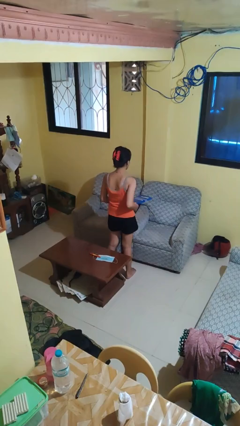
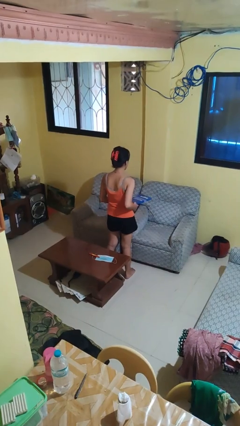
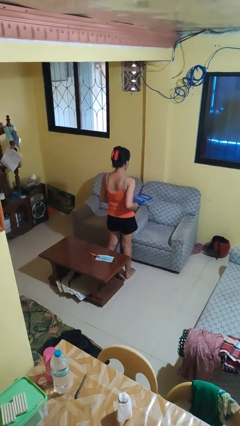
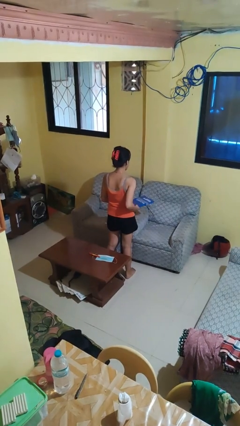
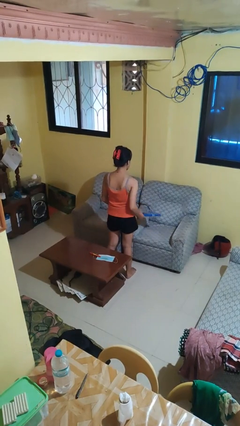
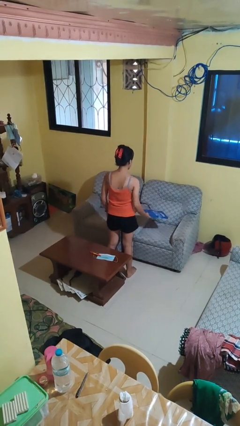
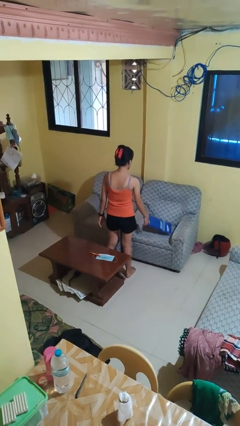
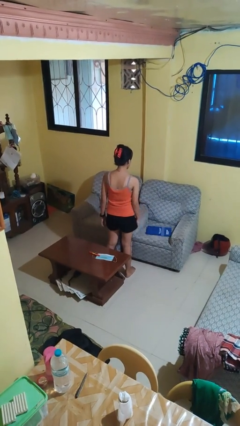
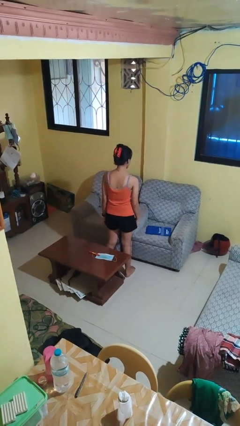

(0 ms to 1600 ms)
person puts down object on couch

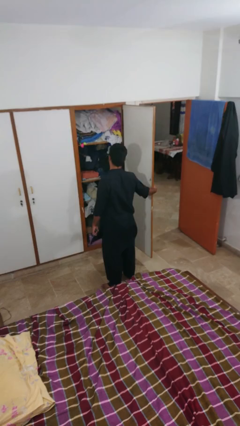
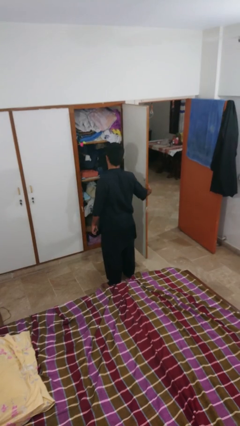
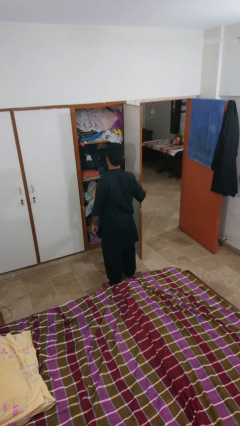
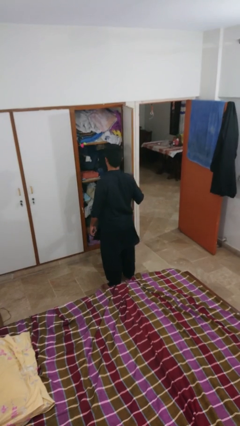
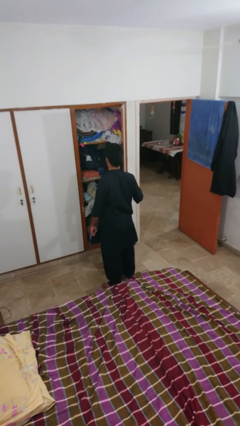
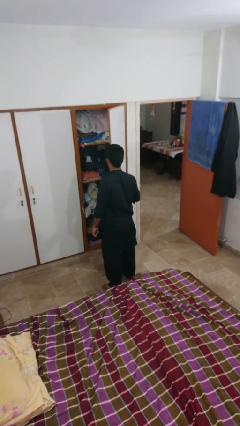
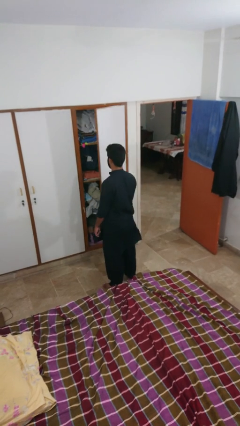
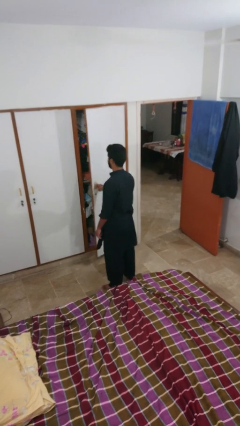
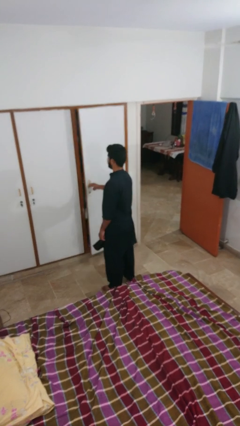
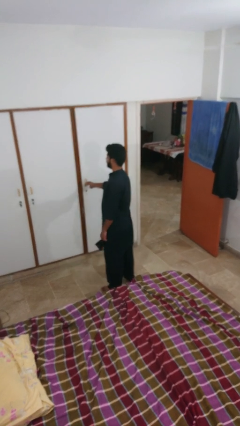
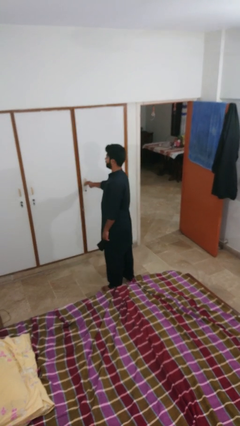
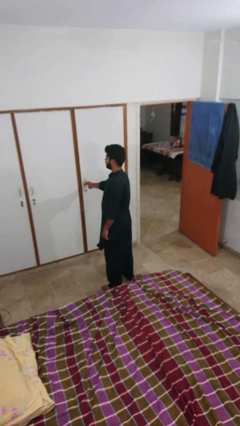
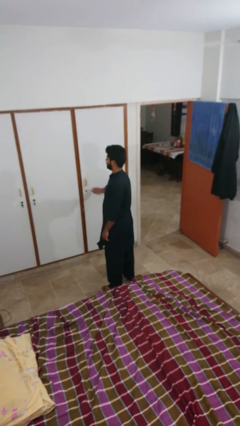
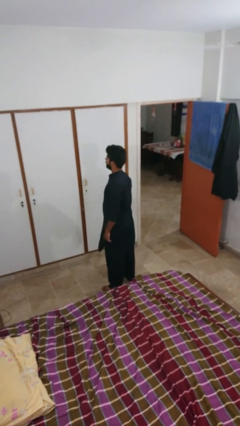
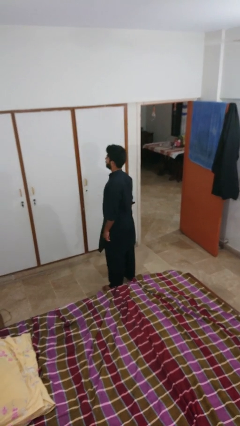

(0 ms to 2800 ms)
person closes closet door

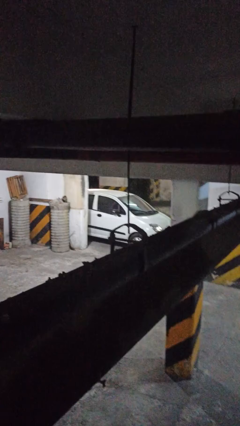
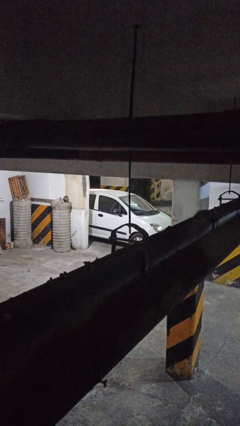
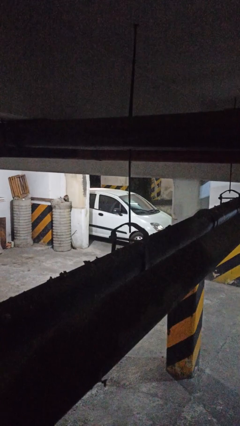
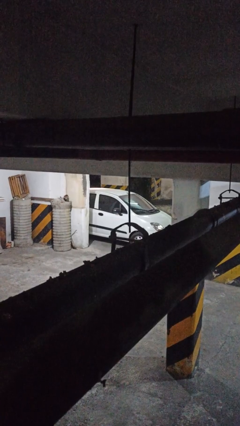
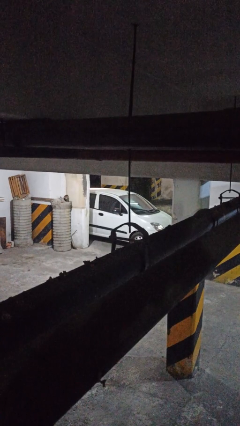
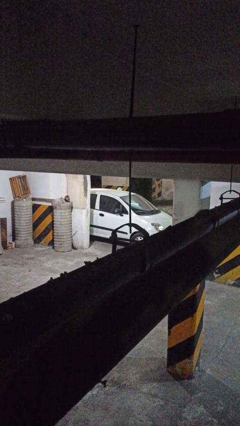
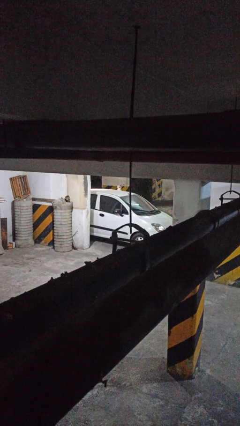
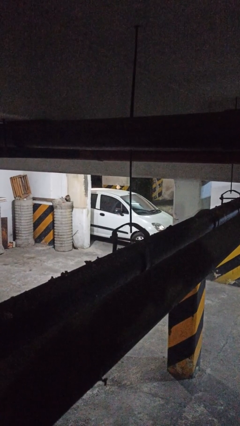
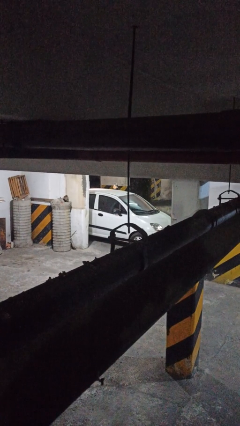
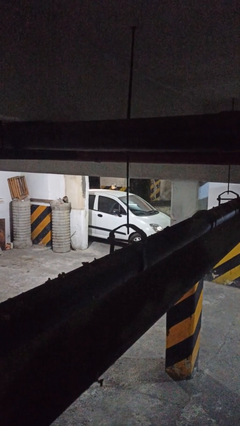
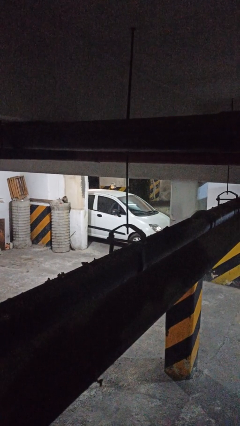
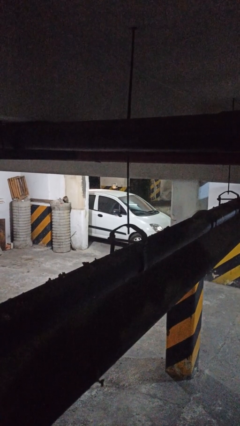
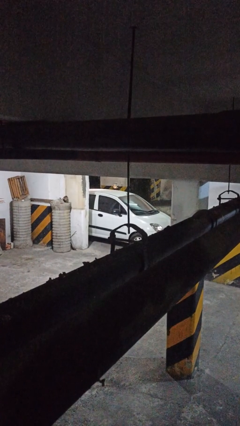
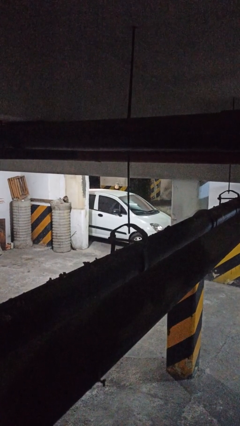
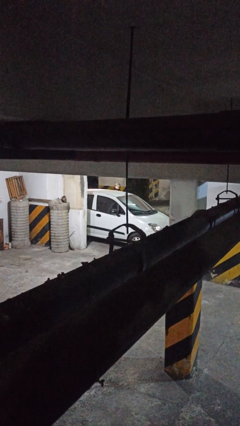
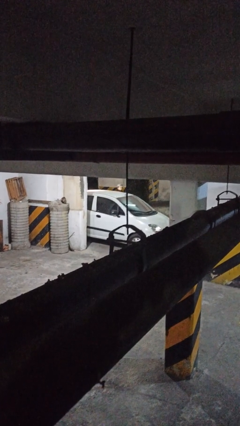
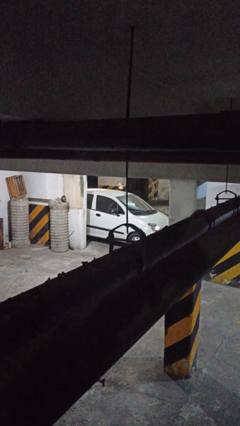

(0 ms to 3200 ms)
car drops off person

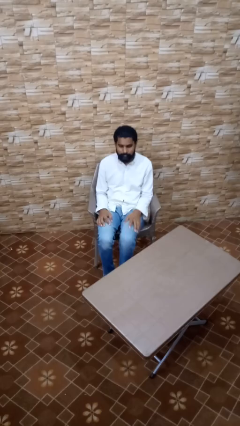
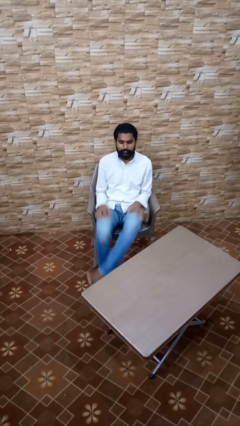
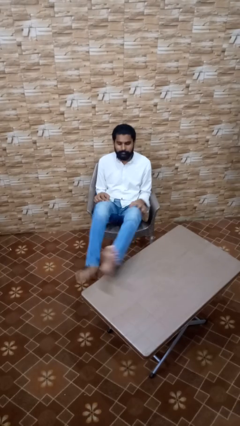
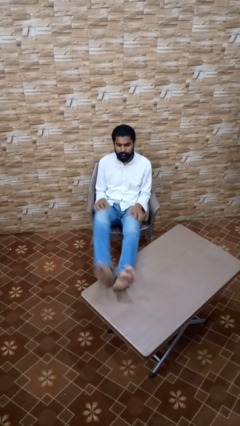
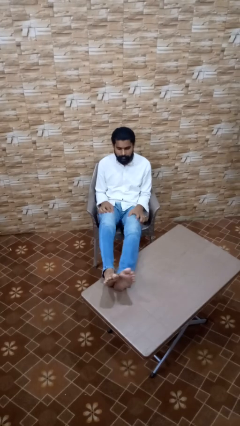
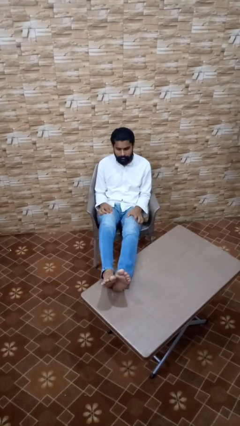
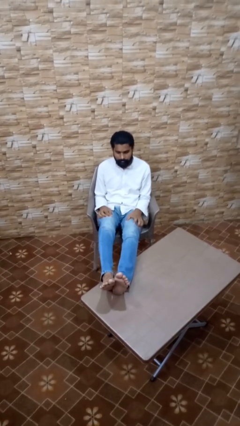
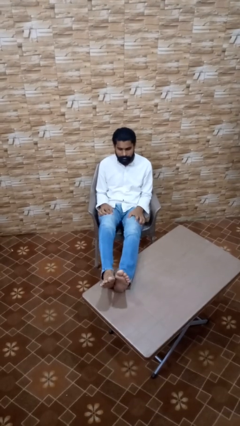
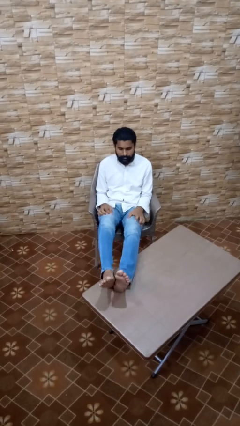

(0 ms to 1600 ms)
person puts feet up

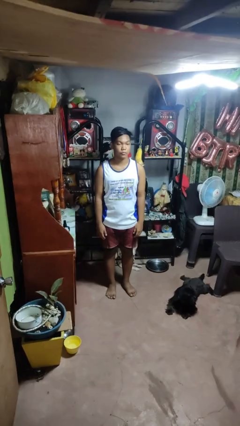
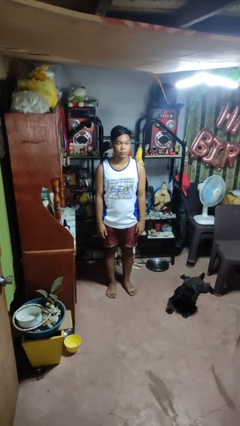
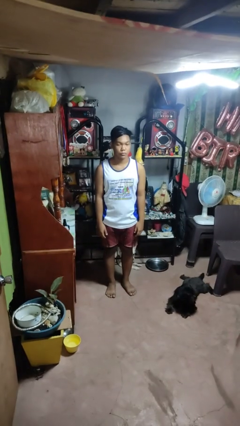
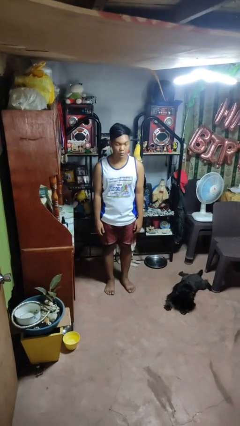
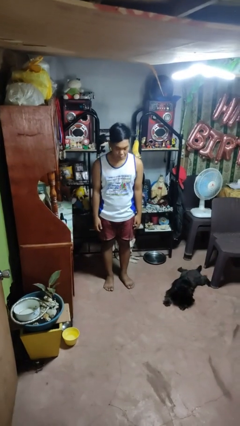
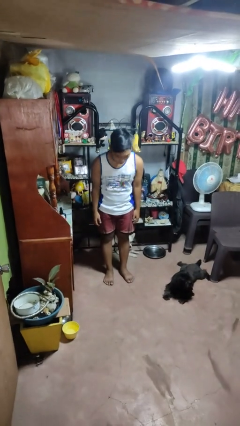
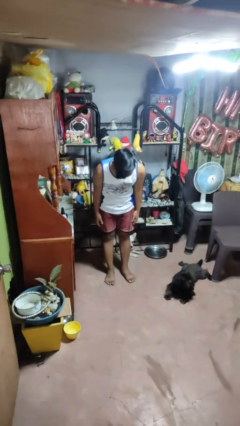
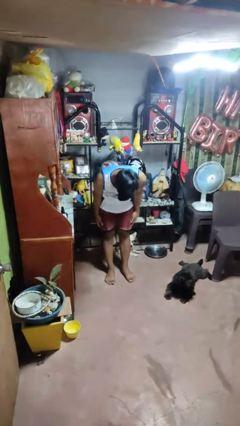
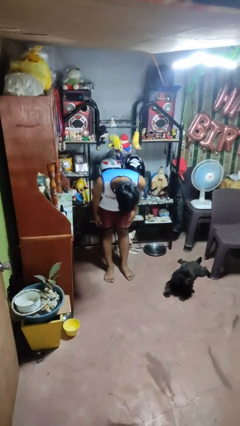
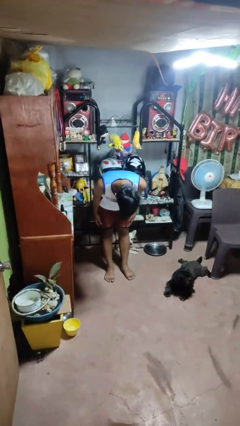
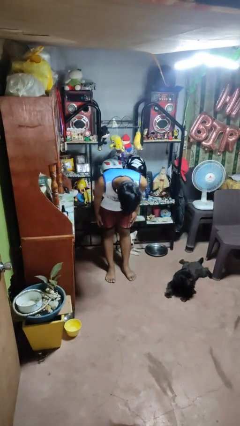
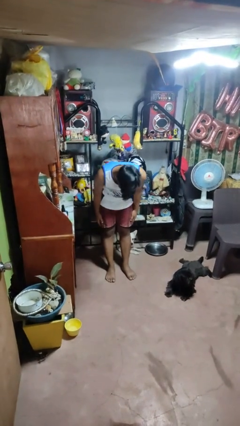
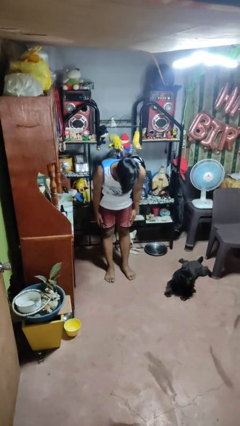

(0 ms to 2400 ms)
person bows

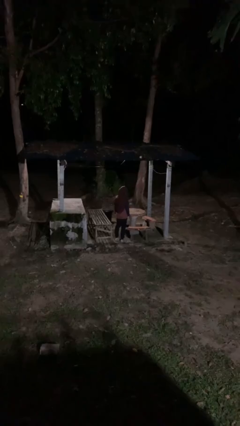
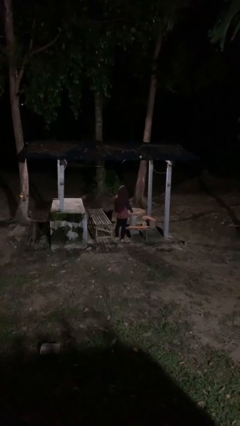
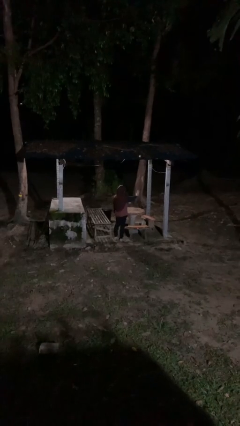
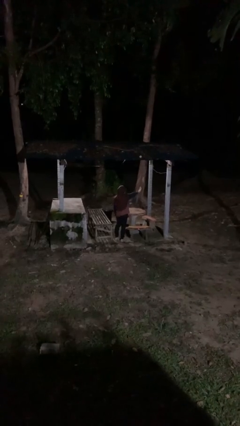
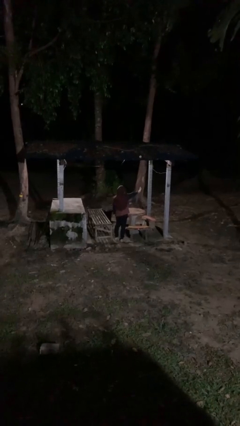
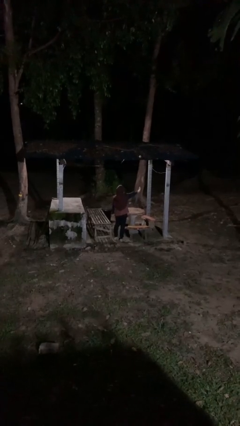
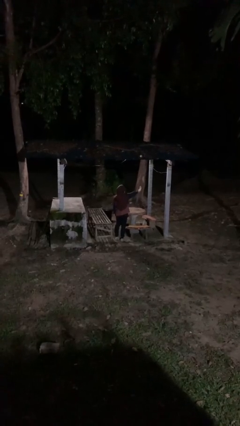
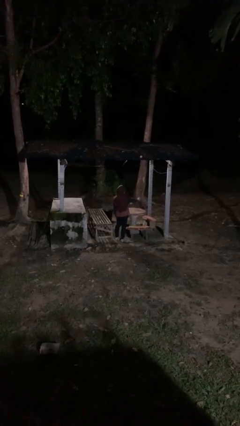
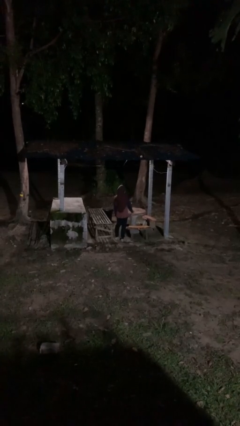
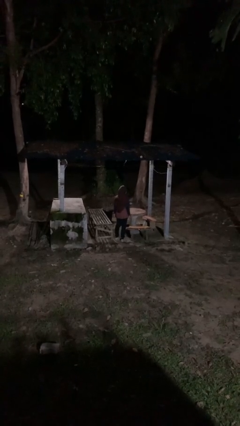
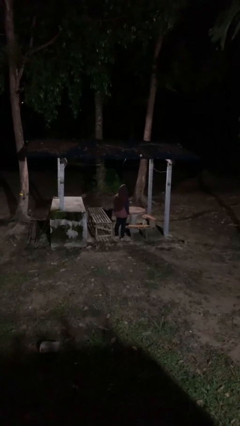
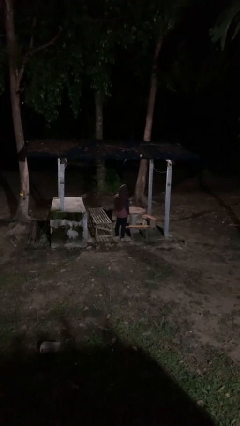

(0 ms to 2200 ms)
person gestures stop

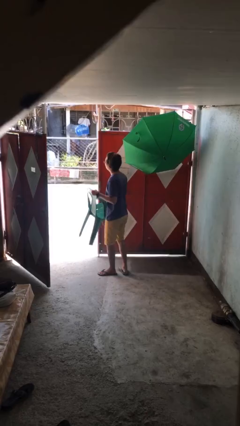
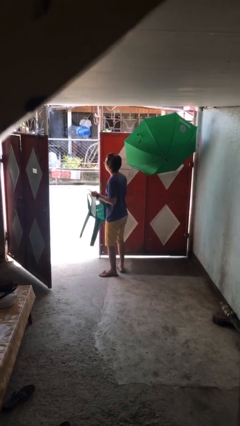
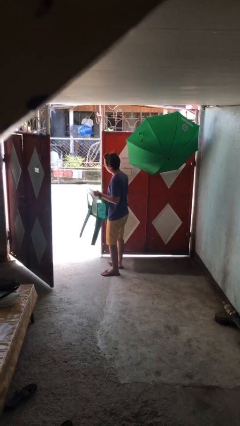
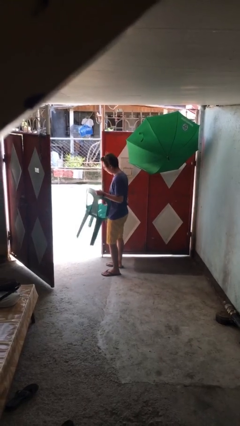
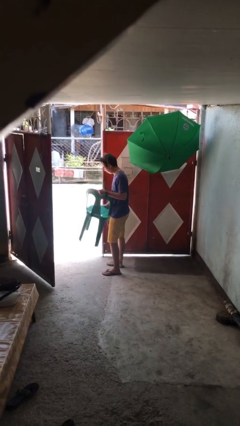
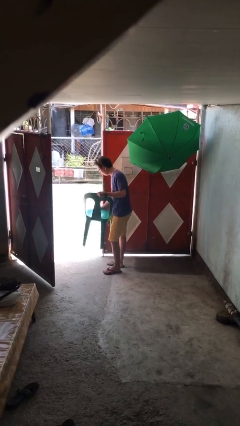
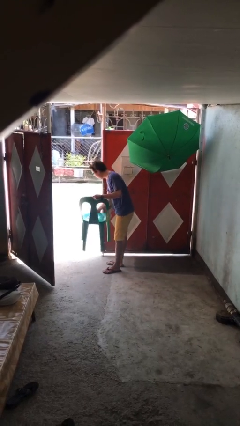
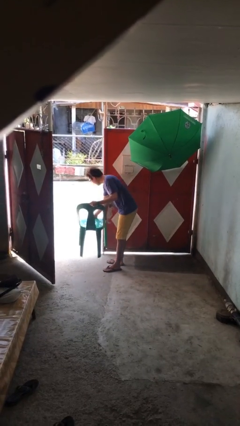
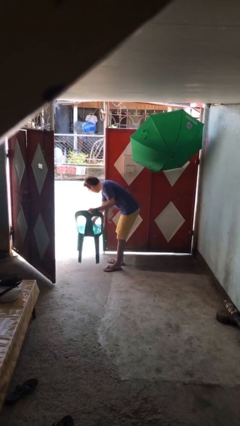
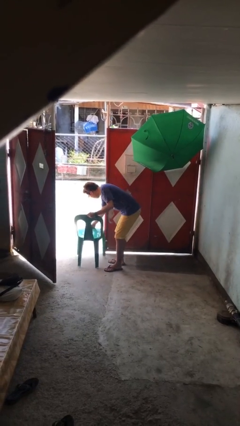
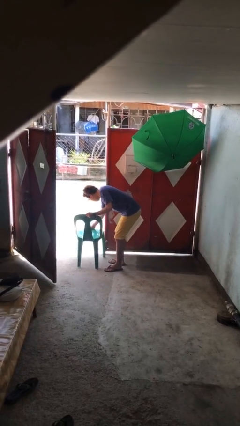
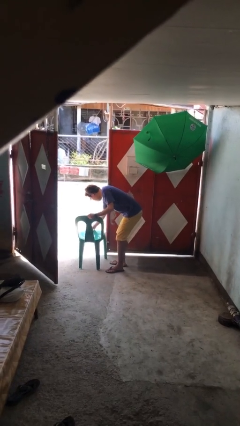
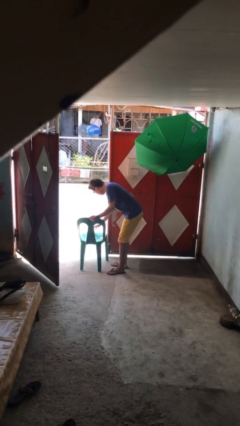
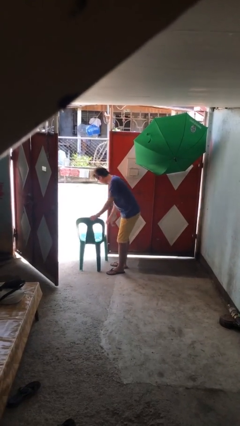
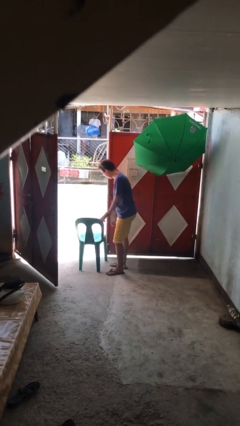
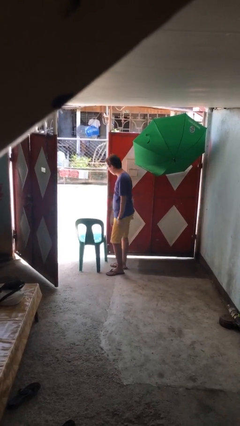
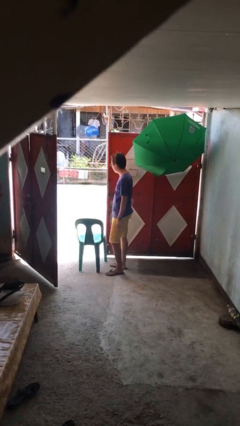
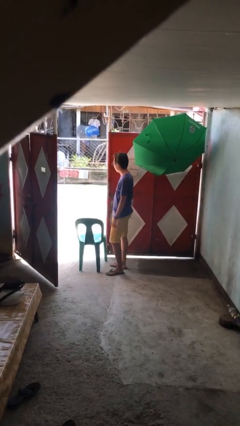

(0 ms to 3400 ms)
person puts down object on floor
